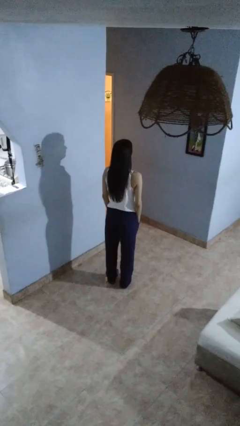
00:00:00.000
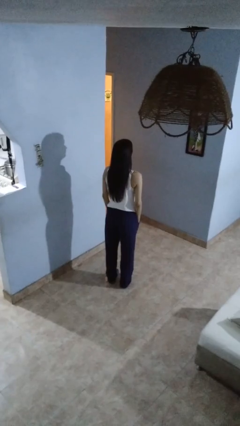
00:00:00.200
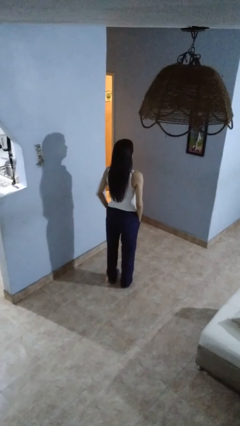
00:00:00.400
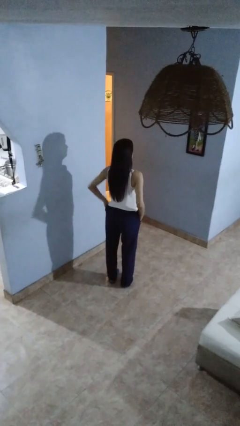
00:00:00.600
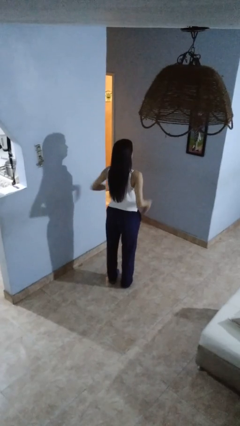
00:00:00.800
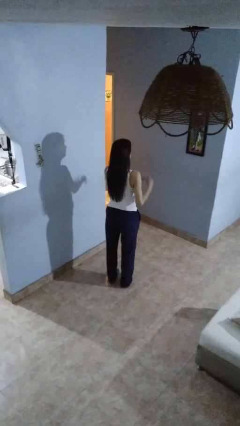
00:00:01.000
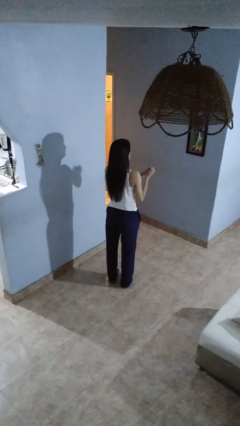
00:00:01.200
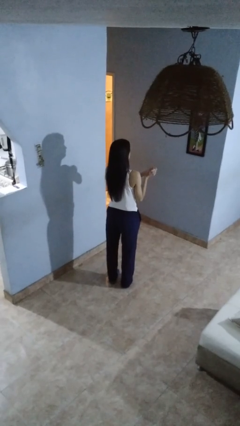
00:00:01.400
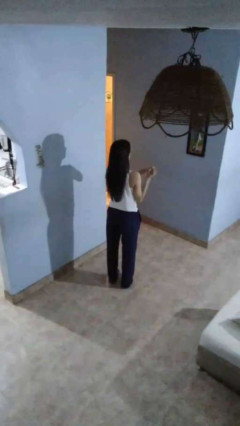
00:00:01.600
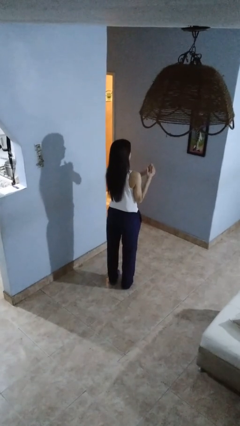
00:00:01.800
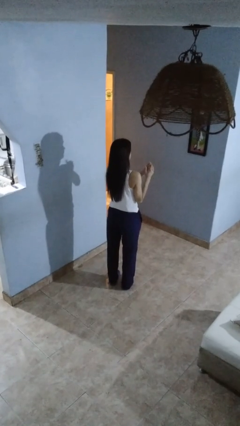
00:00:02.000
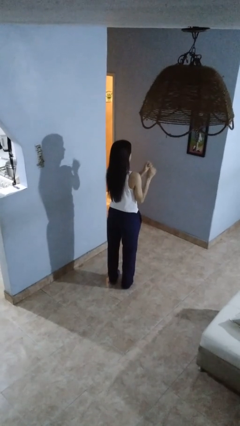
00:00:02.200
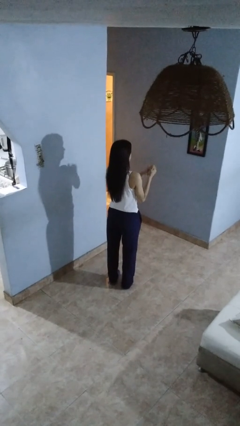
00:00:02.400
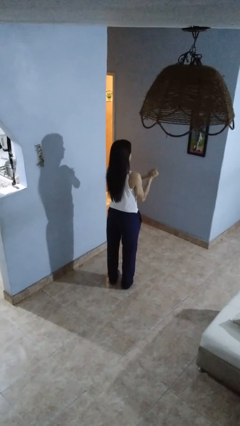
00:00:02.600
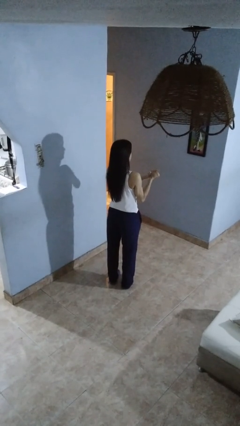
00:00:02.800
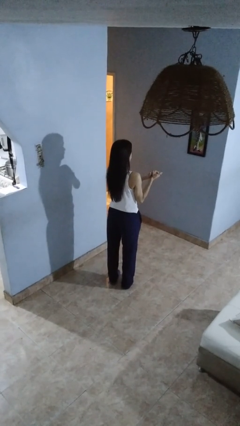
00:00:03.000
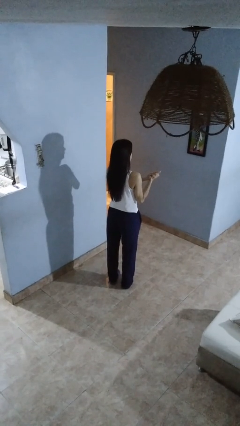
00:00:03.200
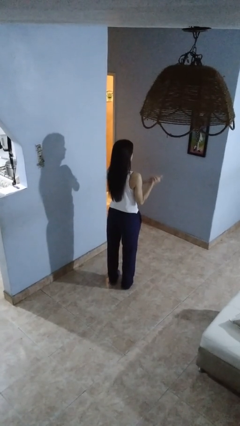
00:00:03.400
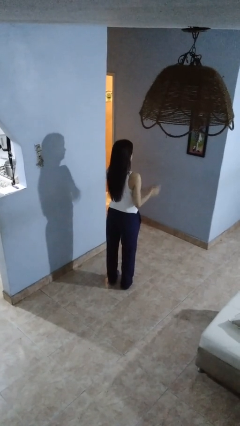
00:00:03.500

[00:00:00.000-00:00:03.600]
person cracks knuckles

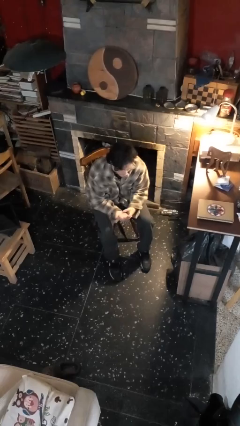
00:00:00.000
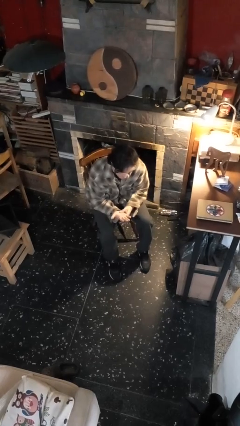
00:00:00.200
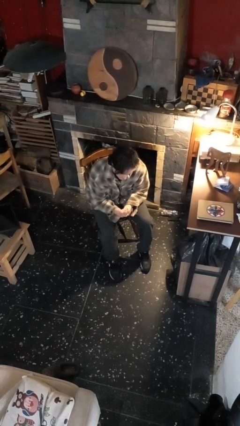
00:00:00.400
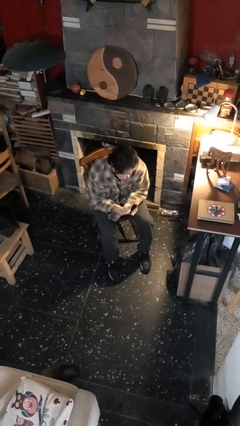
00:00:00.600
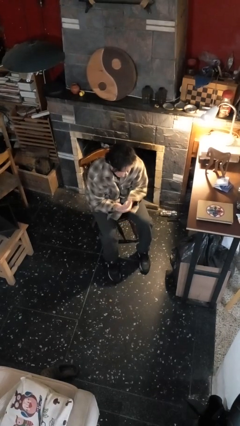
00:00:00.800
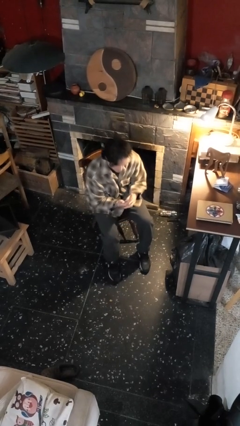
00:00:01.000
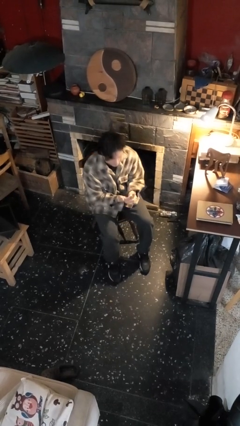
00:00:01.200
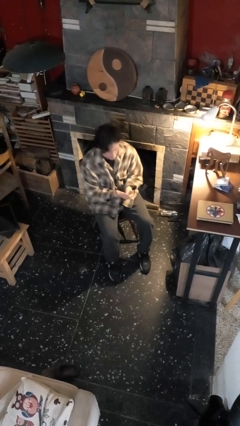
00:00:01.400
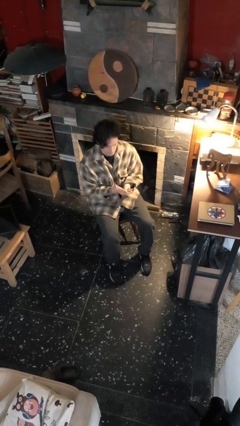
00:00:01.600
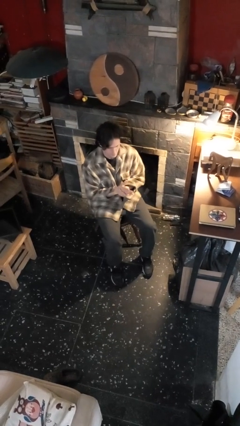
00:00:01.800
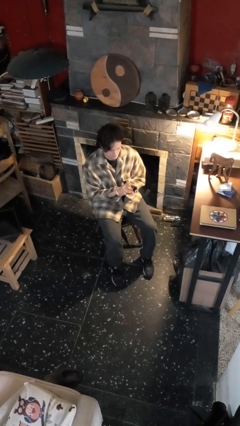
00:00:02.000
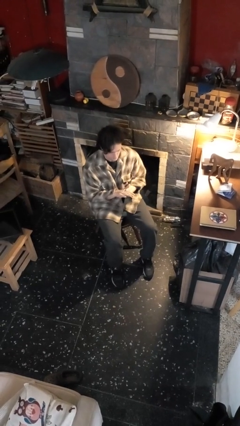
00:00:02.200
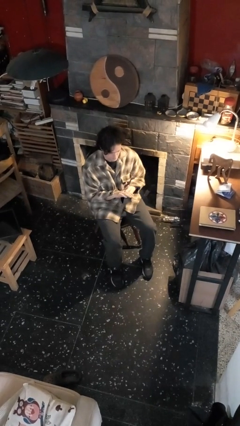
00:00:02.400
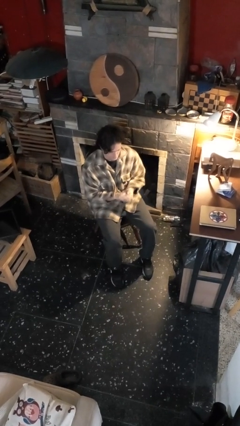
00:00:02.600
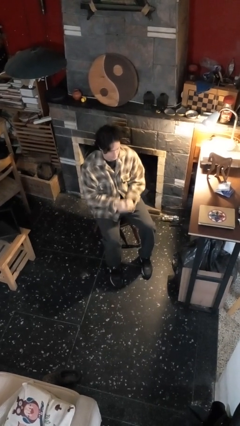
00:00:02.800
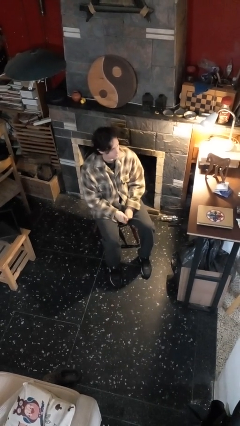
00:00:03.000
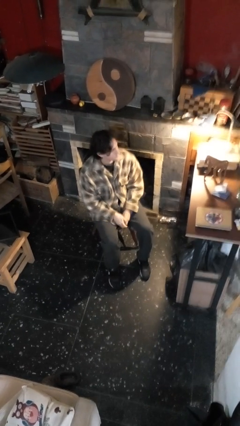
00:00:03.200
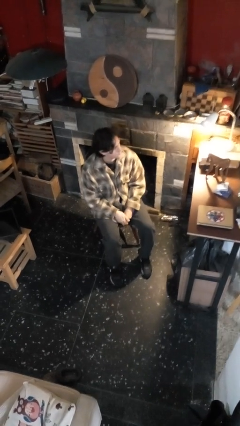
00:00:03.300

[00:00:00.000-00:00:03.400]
person looks at hands in lap

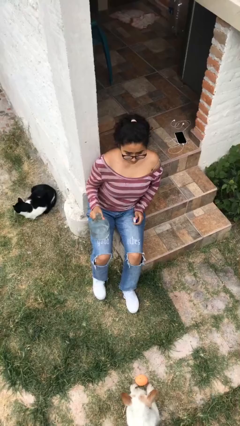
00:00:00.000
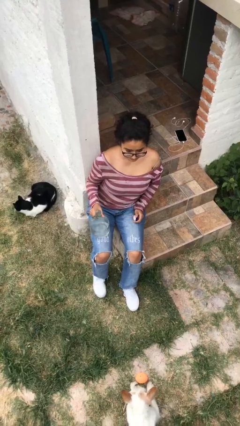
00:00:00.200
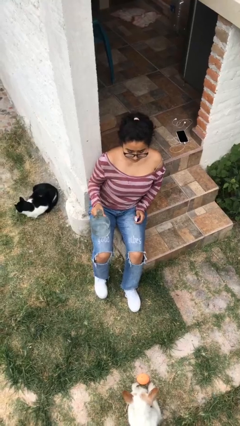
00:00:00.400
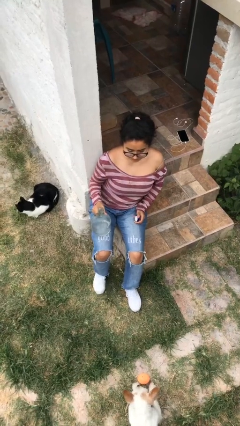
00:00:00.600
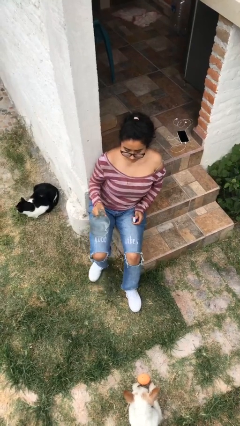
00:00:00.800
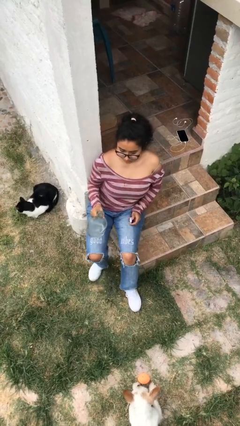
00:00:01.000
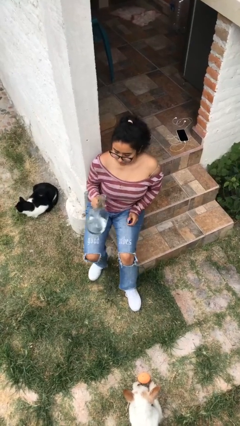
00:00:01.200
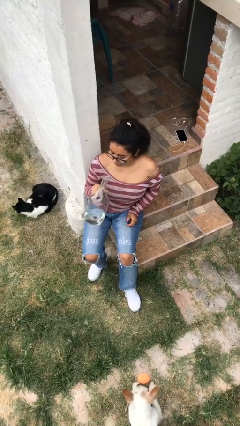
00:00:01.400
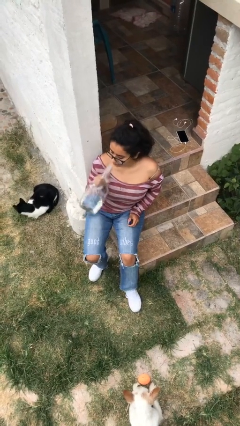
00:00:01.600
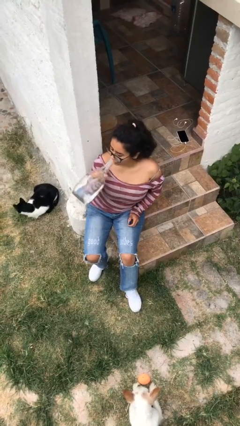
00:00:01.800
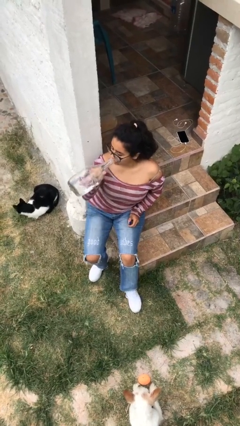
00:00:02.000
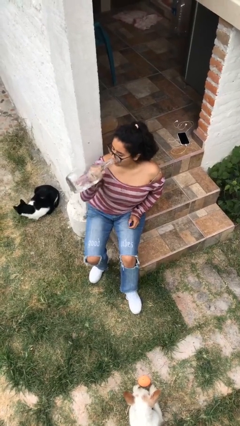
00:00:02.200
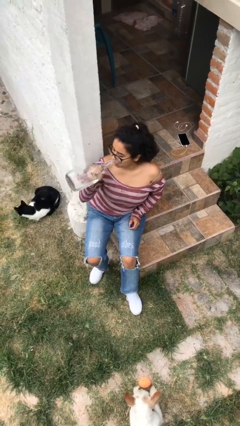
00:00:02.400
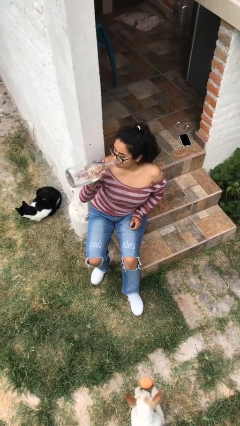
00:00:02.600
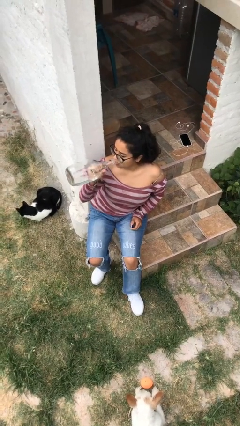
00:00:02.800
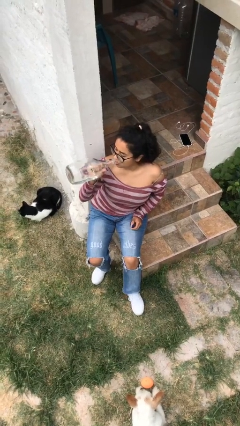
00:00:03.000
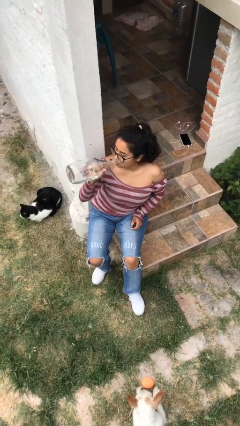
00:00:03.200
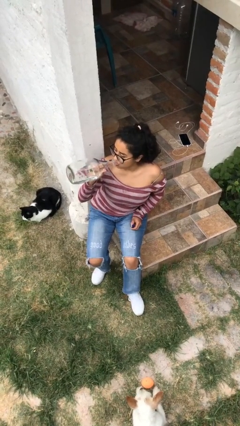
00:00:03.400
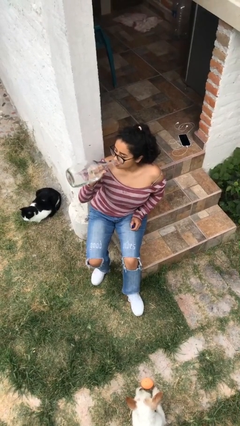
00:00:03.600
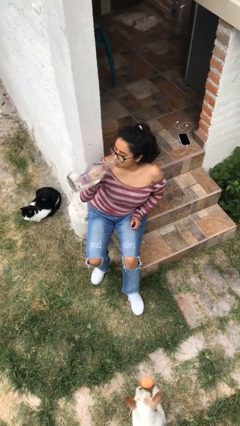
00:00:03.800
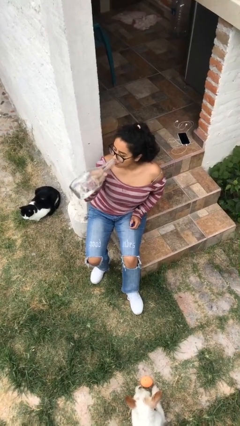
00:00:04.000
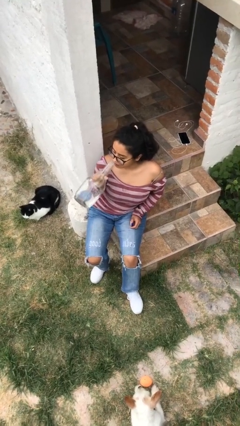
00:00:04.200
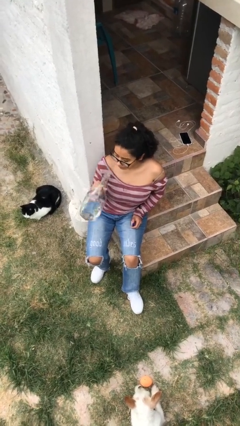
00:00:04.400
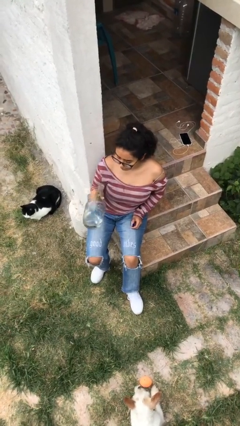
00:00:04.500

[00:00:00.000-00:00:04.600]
person drinks from bottle

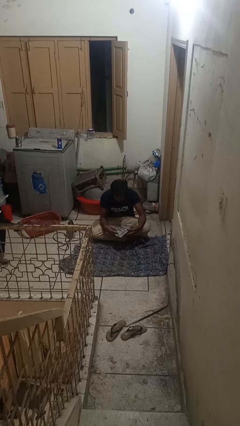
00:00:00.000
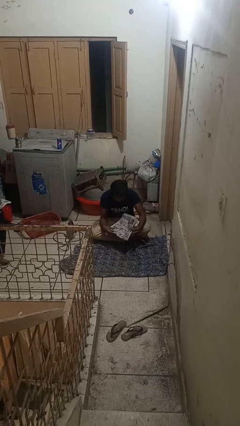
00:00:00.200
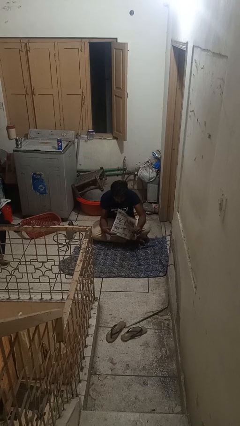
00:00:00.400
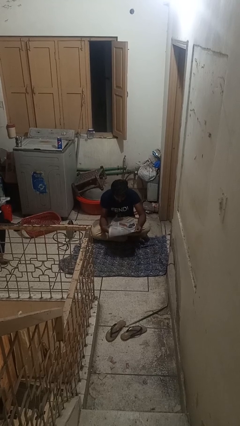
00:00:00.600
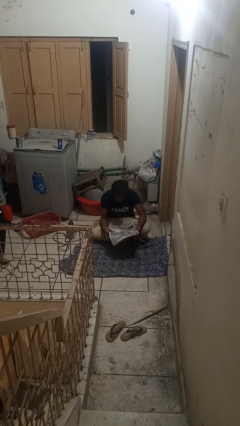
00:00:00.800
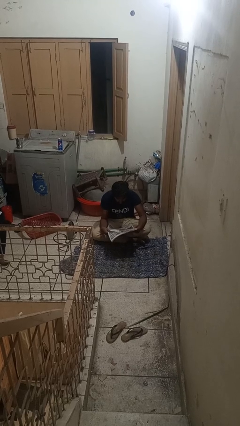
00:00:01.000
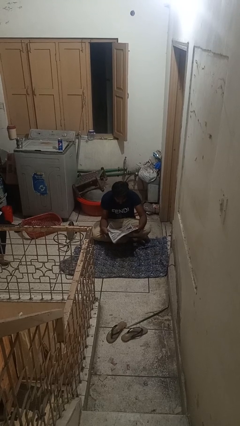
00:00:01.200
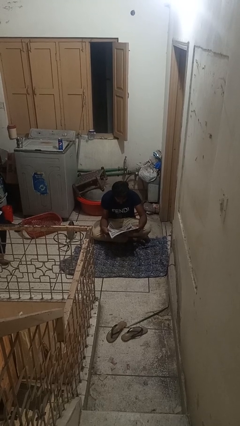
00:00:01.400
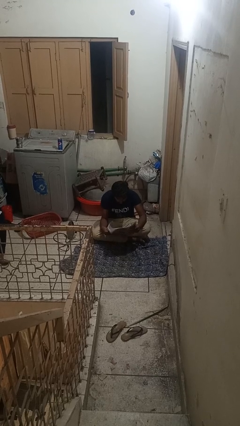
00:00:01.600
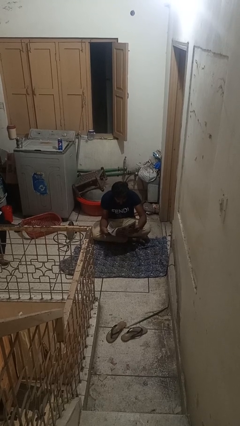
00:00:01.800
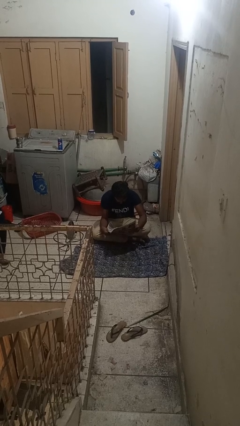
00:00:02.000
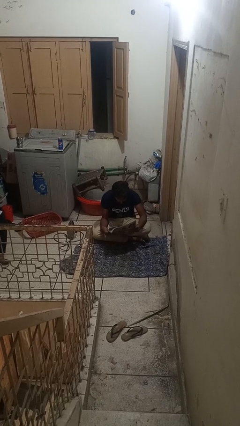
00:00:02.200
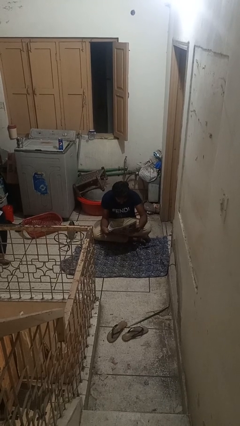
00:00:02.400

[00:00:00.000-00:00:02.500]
person reads newspaper

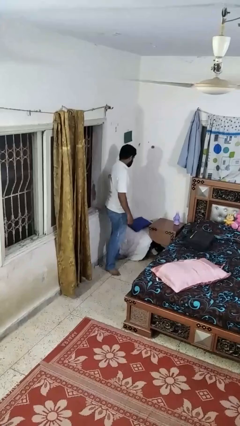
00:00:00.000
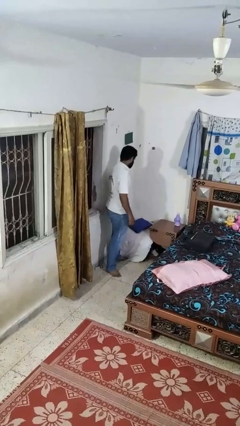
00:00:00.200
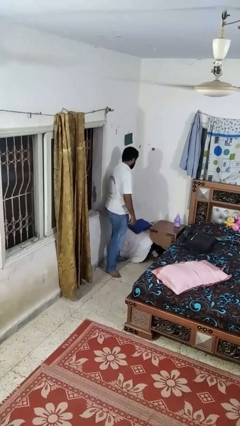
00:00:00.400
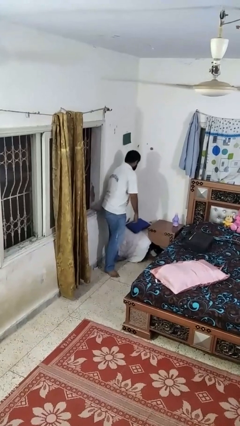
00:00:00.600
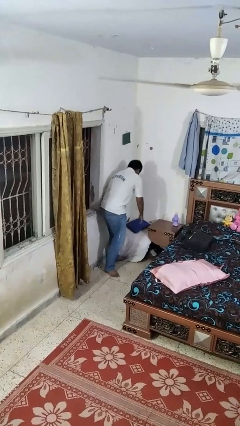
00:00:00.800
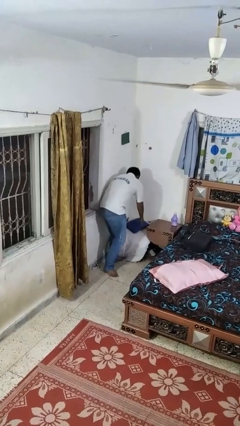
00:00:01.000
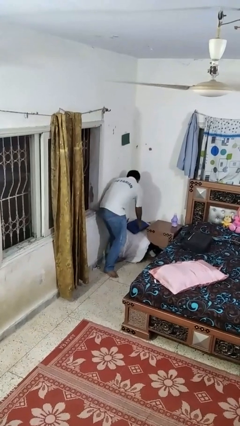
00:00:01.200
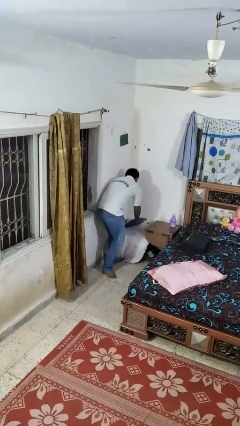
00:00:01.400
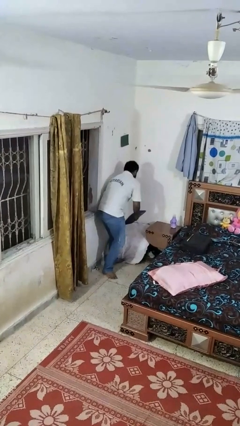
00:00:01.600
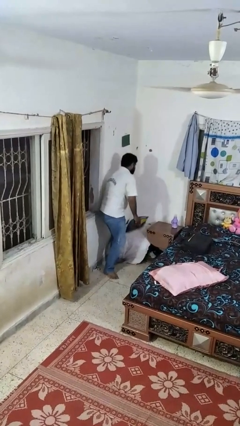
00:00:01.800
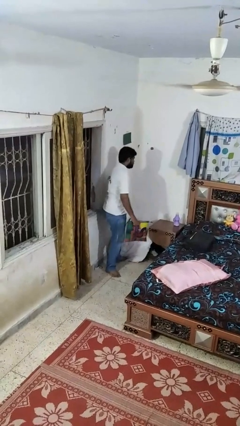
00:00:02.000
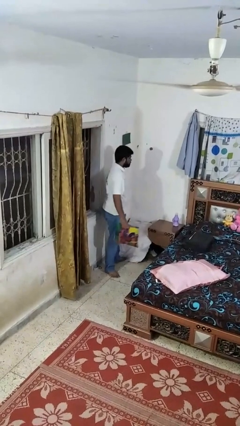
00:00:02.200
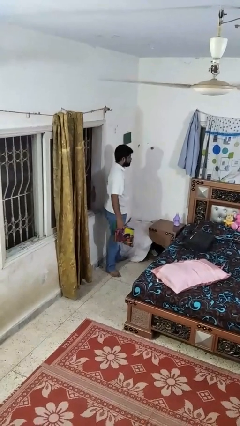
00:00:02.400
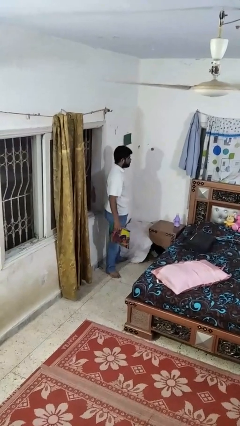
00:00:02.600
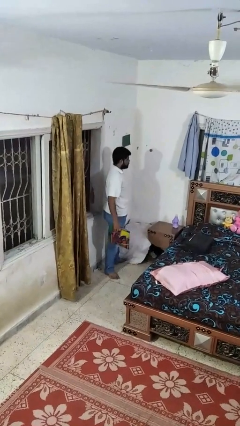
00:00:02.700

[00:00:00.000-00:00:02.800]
person picks up object from couch

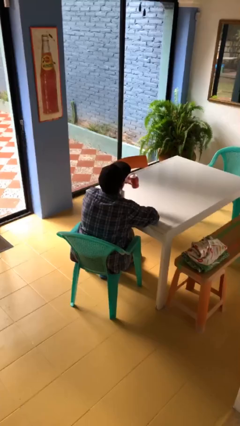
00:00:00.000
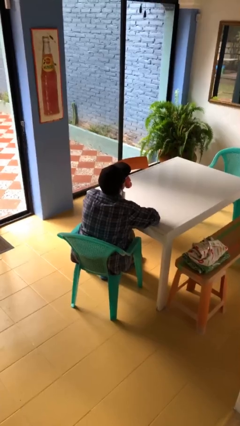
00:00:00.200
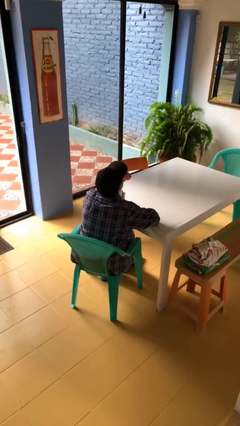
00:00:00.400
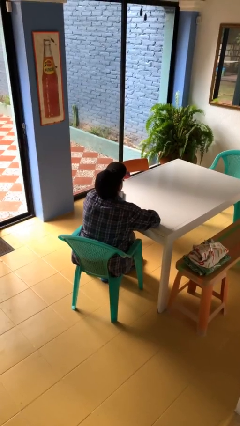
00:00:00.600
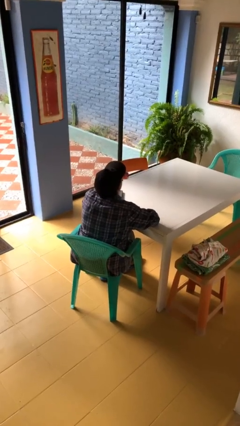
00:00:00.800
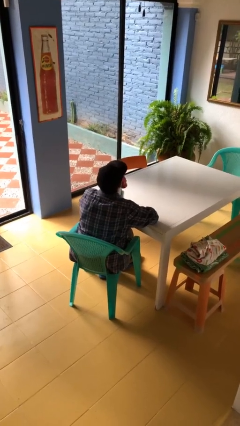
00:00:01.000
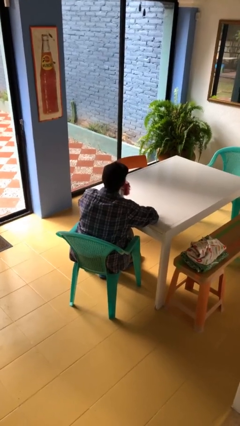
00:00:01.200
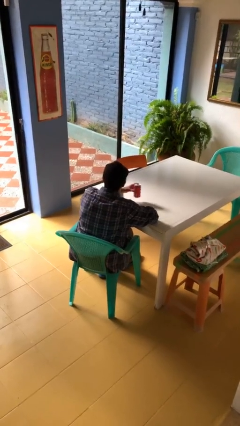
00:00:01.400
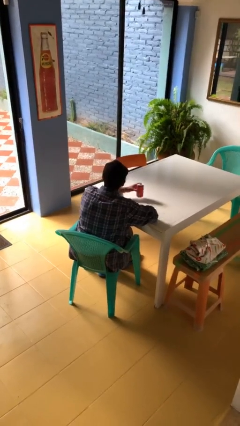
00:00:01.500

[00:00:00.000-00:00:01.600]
person drinks from beverage can
